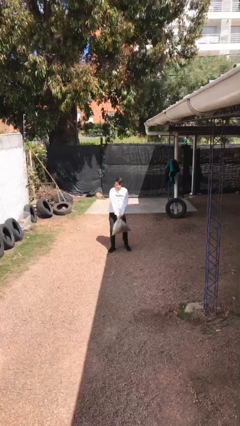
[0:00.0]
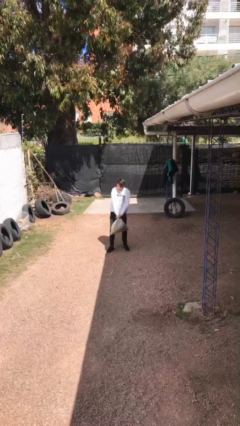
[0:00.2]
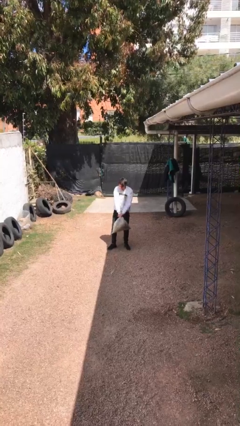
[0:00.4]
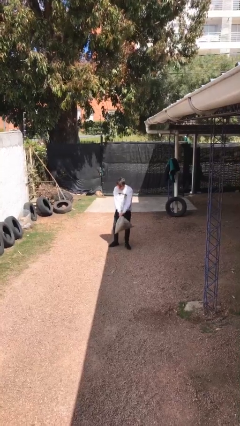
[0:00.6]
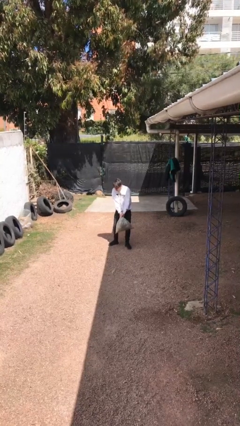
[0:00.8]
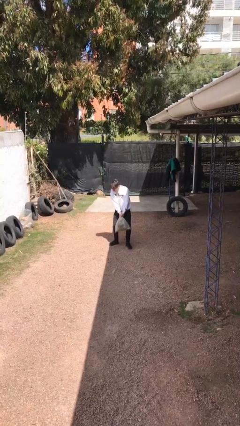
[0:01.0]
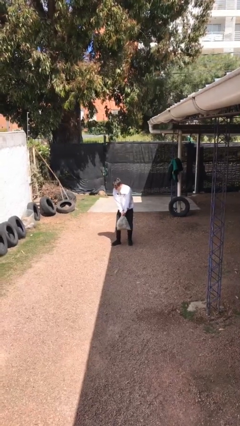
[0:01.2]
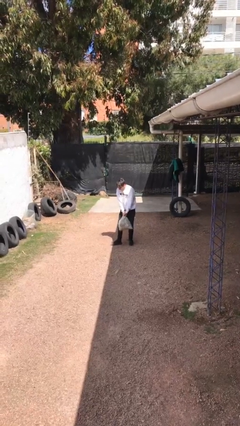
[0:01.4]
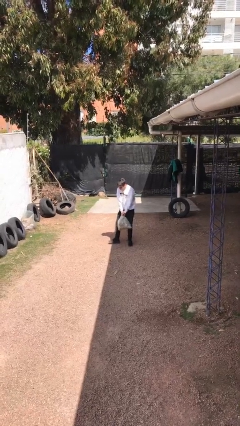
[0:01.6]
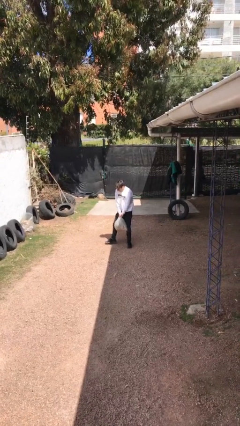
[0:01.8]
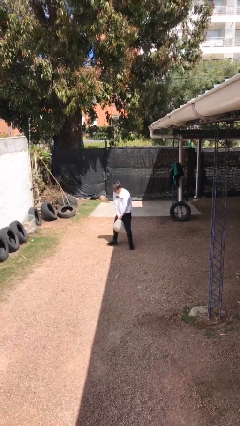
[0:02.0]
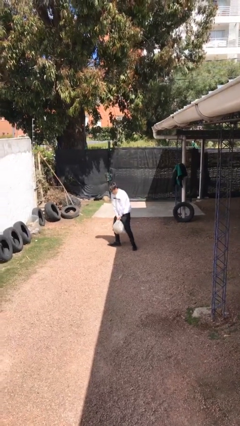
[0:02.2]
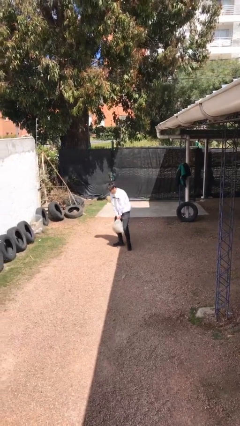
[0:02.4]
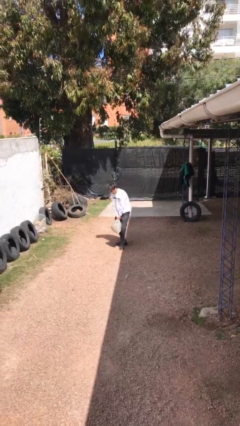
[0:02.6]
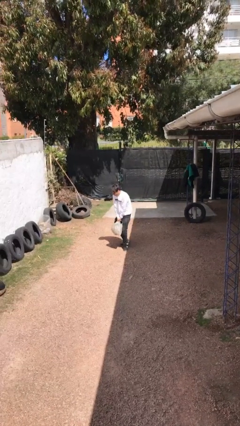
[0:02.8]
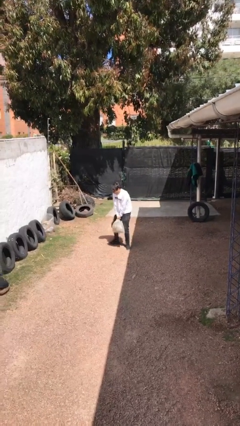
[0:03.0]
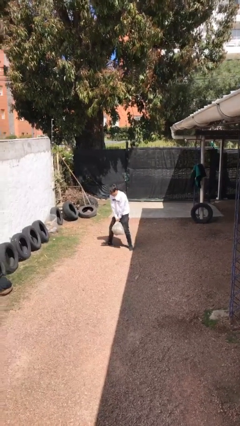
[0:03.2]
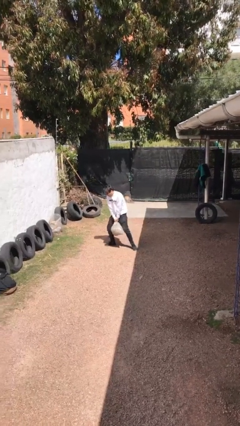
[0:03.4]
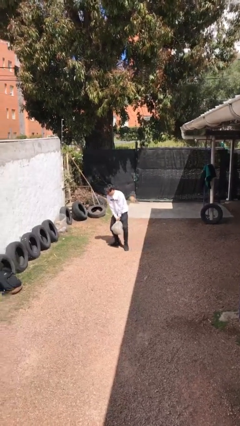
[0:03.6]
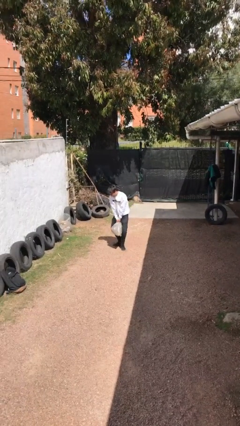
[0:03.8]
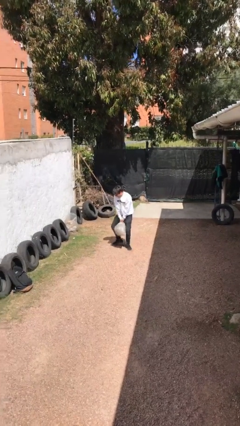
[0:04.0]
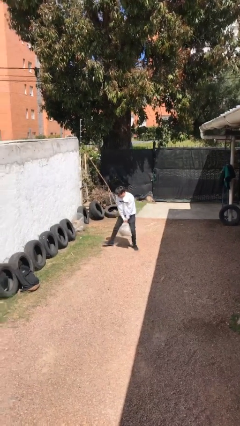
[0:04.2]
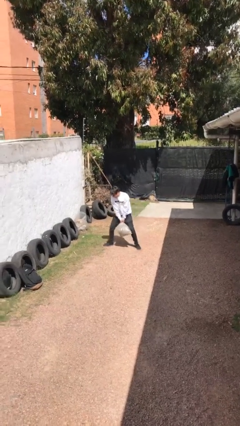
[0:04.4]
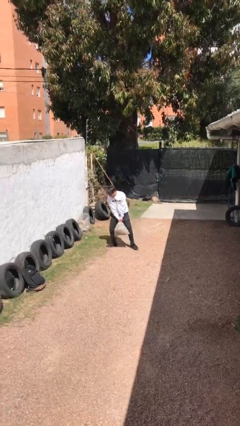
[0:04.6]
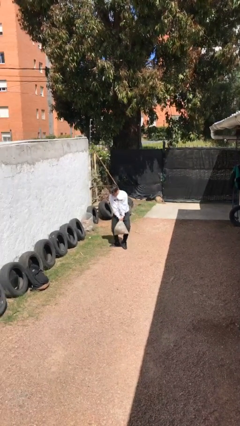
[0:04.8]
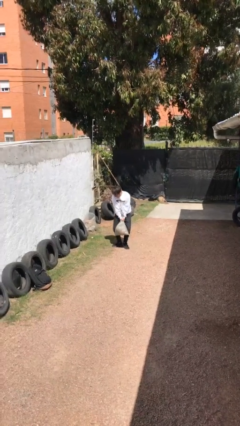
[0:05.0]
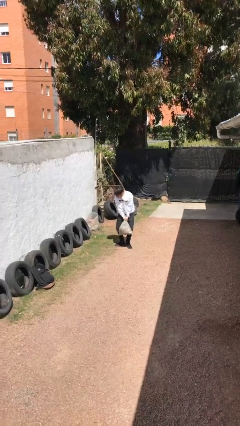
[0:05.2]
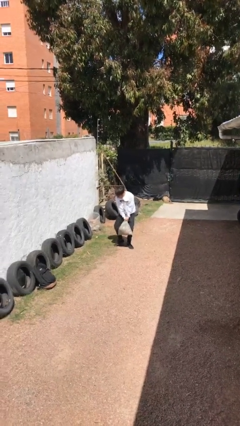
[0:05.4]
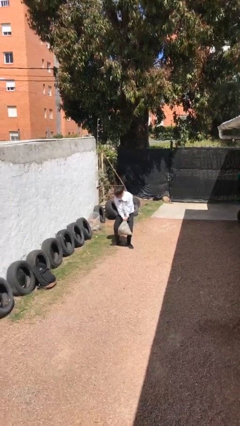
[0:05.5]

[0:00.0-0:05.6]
person carries heavy object

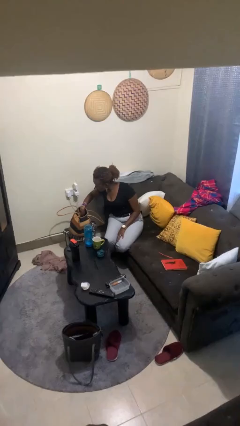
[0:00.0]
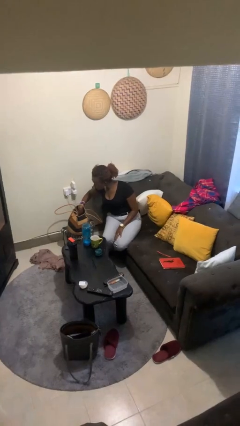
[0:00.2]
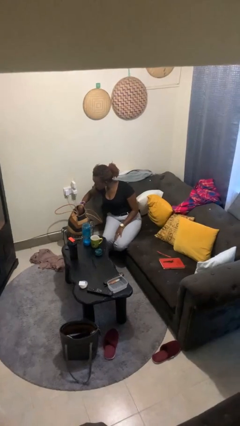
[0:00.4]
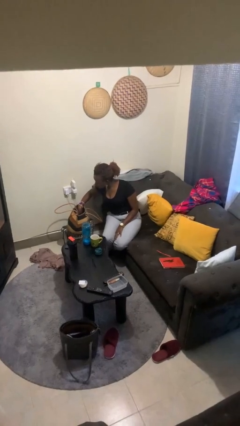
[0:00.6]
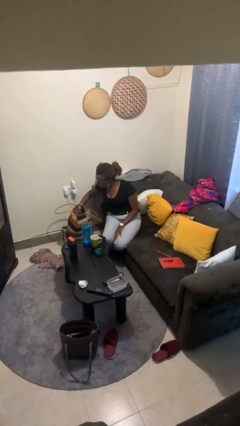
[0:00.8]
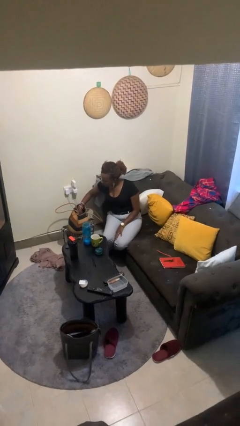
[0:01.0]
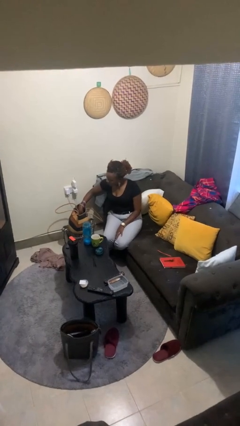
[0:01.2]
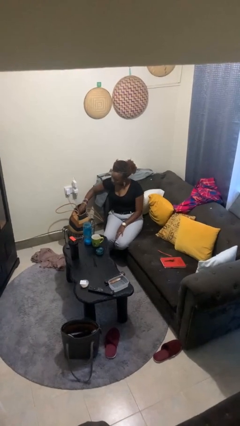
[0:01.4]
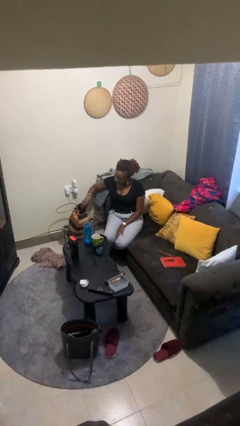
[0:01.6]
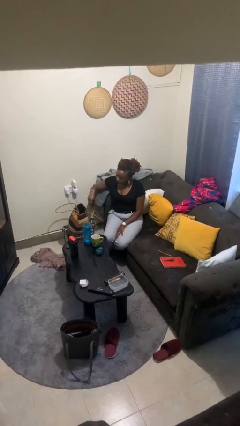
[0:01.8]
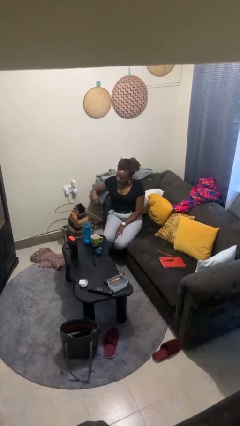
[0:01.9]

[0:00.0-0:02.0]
person takes object from purse

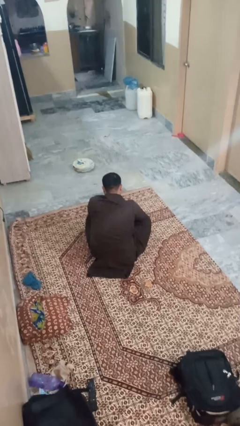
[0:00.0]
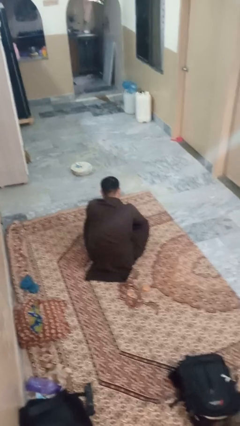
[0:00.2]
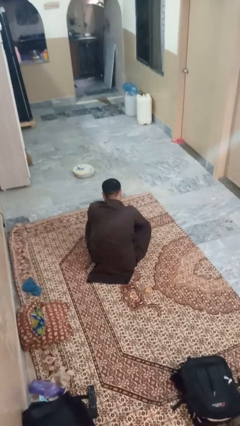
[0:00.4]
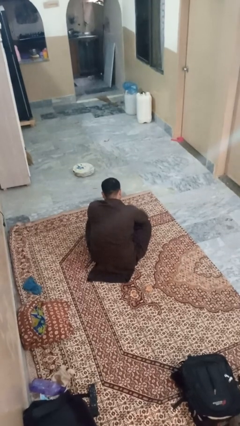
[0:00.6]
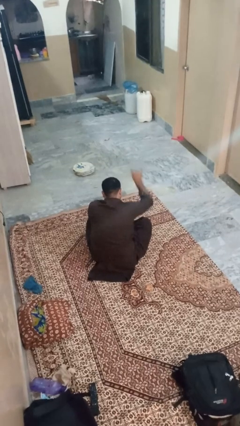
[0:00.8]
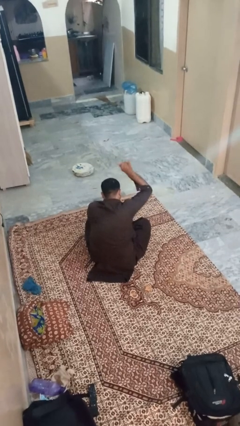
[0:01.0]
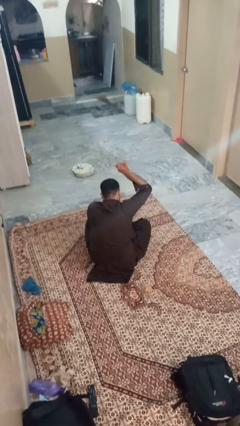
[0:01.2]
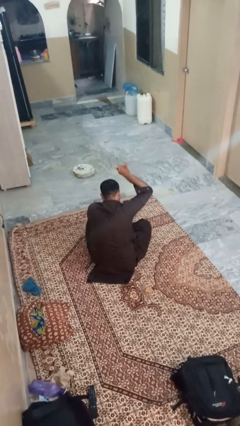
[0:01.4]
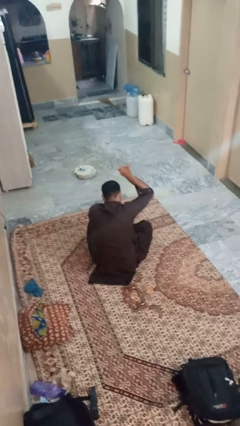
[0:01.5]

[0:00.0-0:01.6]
person gestures hang loose

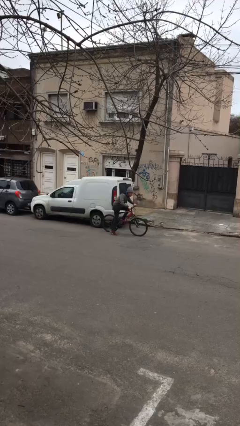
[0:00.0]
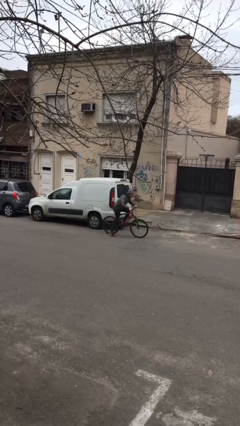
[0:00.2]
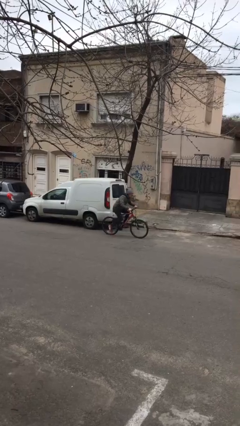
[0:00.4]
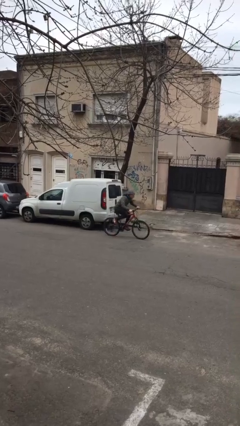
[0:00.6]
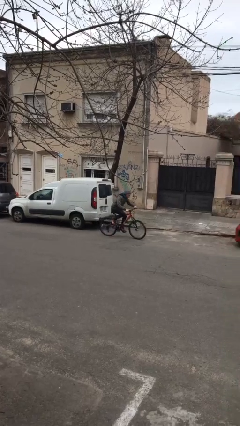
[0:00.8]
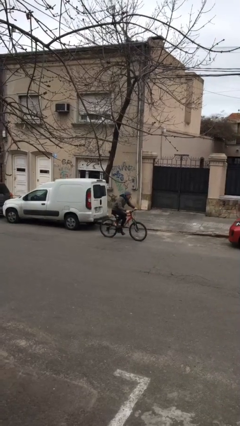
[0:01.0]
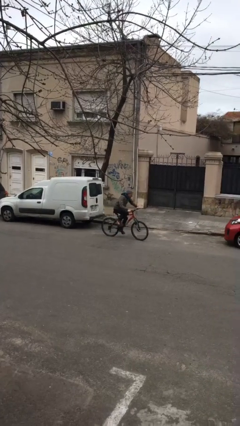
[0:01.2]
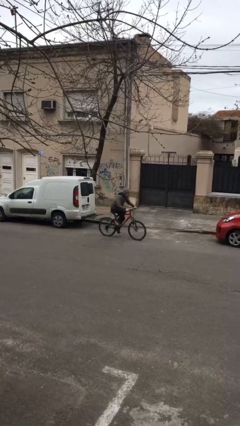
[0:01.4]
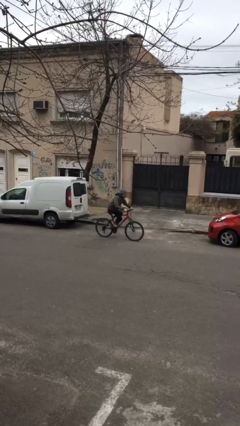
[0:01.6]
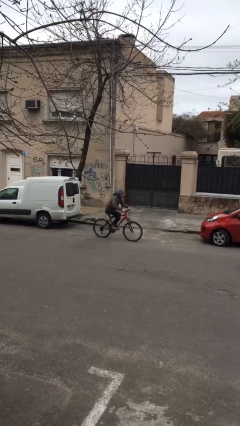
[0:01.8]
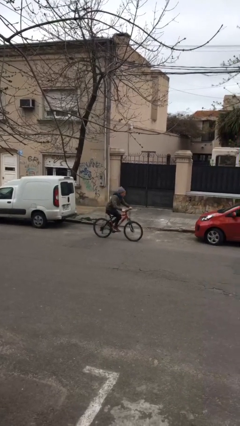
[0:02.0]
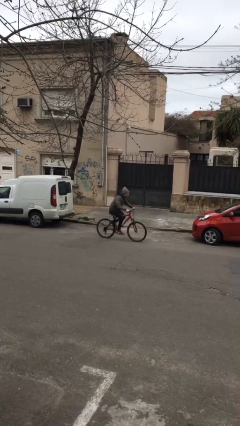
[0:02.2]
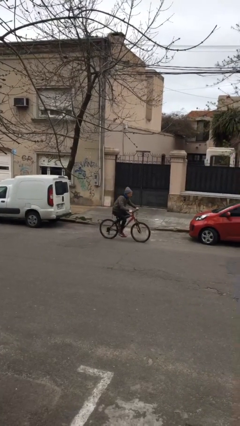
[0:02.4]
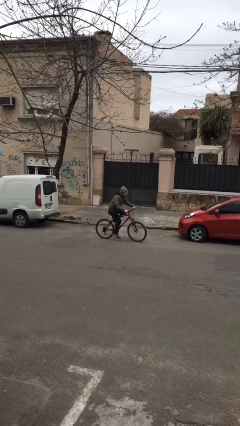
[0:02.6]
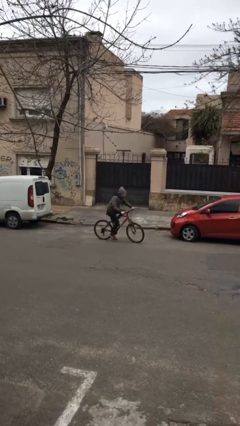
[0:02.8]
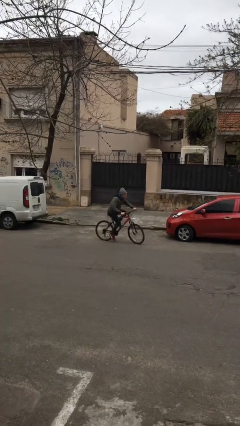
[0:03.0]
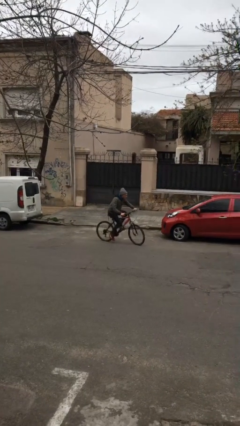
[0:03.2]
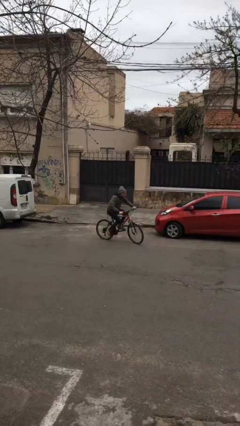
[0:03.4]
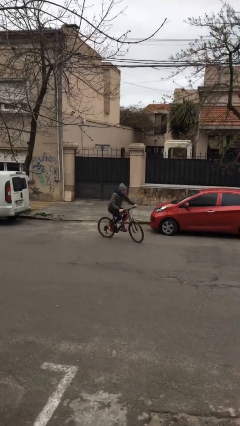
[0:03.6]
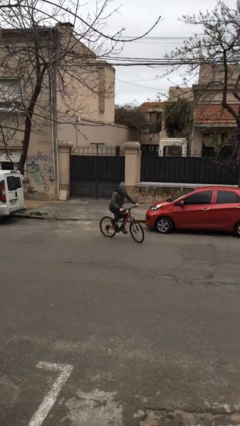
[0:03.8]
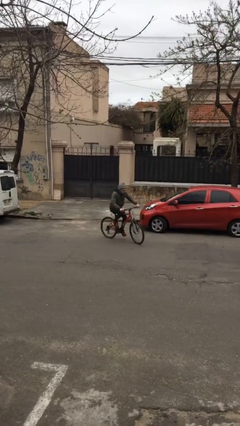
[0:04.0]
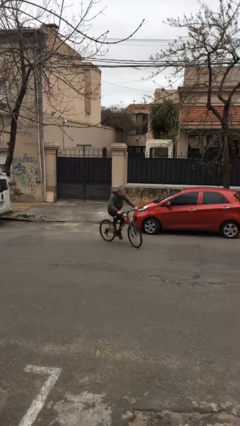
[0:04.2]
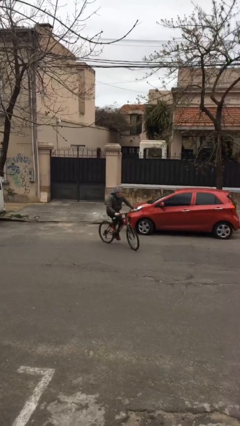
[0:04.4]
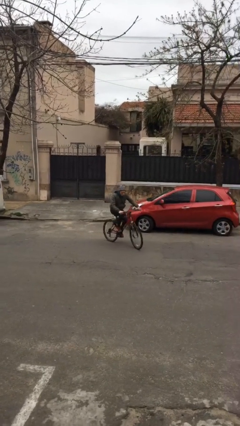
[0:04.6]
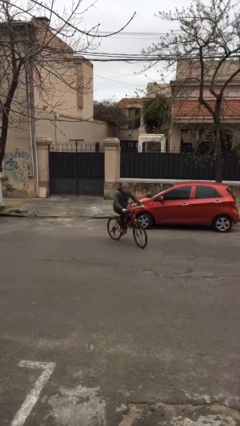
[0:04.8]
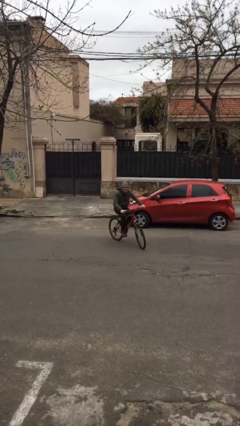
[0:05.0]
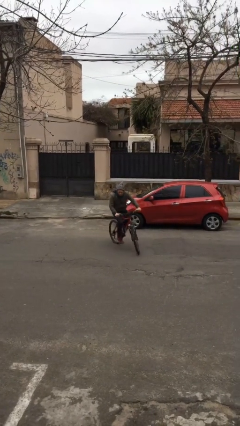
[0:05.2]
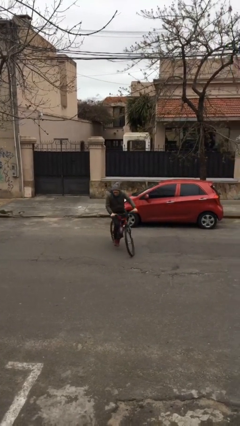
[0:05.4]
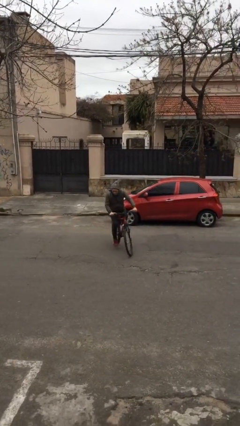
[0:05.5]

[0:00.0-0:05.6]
person rides bicycle

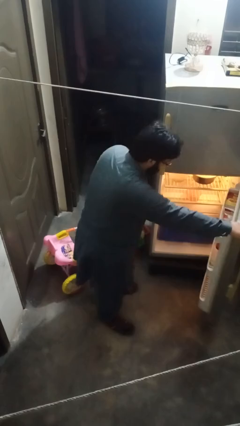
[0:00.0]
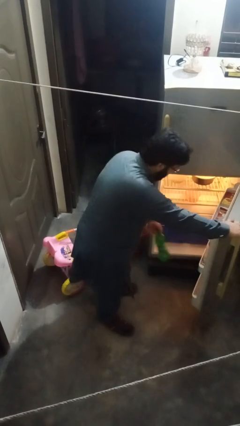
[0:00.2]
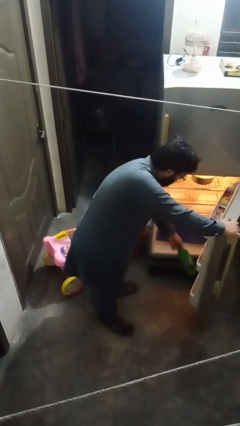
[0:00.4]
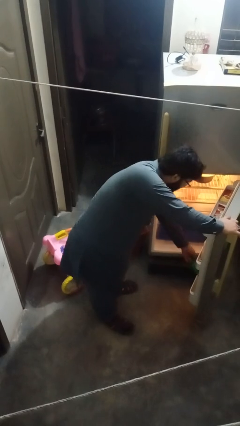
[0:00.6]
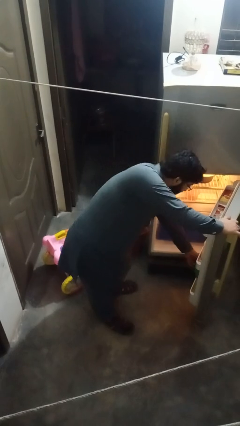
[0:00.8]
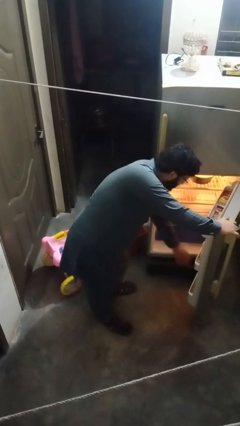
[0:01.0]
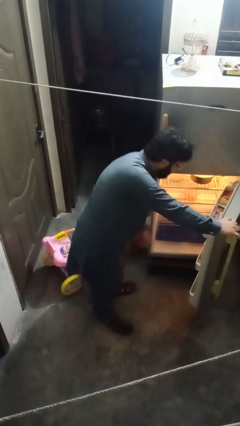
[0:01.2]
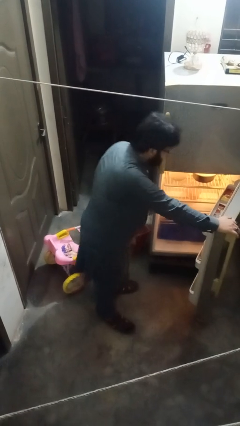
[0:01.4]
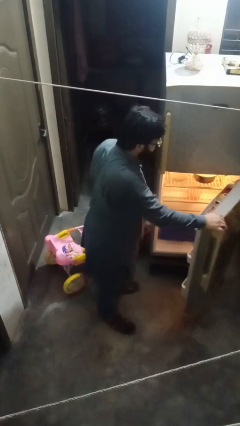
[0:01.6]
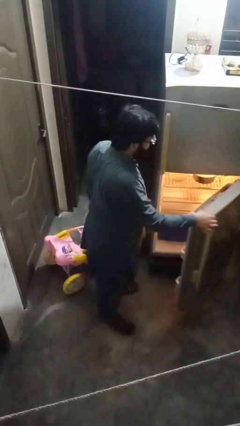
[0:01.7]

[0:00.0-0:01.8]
person puts object into refrigerator

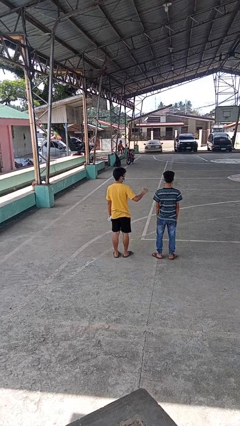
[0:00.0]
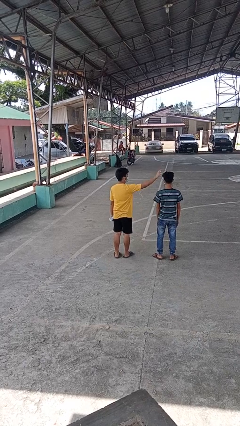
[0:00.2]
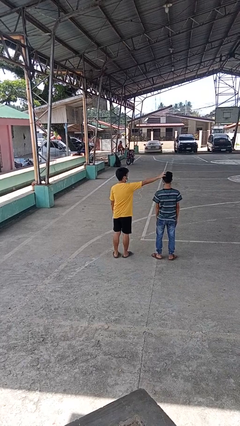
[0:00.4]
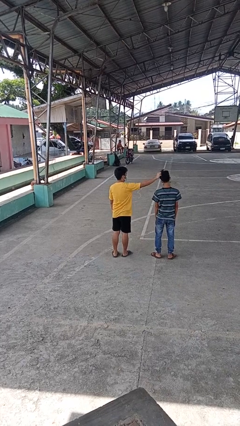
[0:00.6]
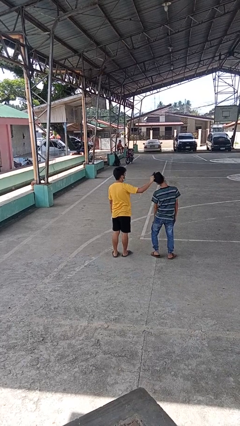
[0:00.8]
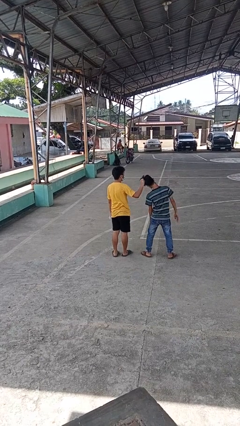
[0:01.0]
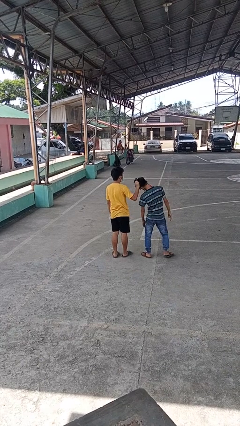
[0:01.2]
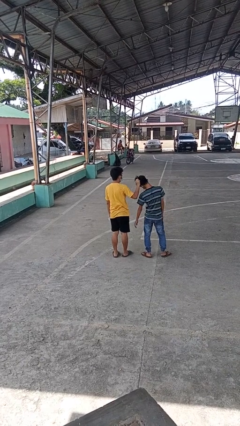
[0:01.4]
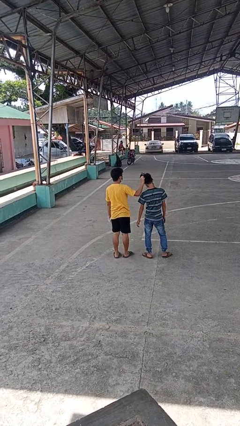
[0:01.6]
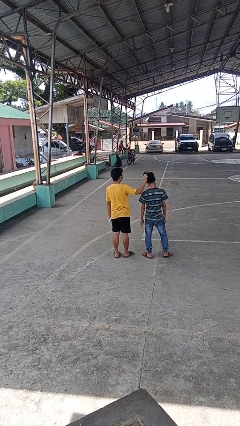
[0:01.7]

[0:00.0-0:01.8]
person grabs person by hair
